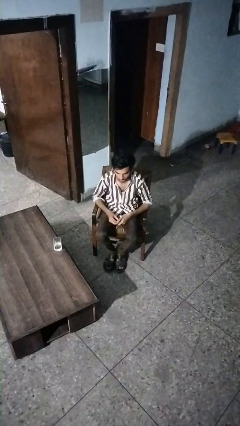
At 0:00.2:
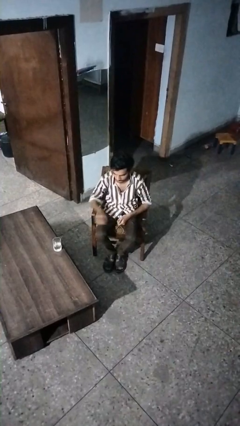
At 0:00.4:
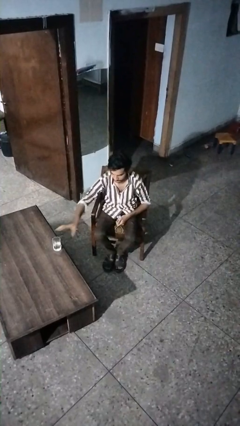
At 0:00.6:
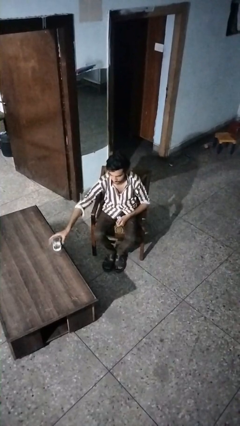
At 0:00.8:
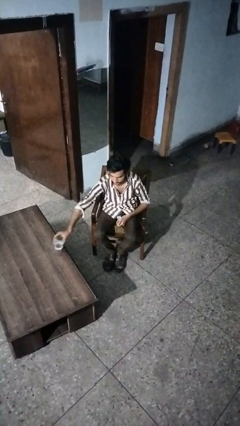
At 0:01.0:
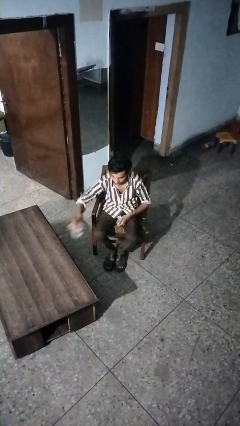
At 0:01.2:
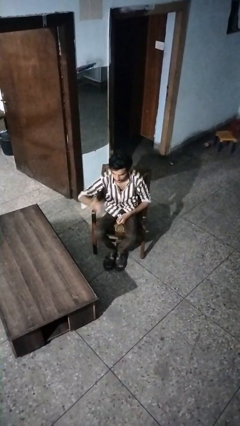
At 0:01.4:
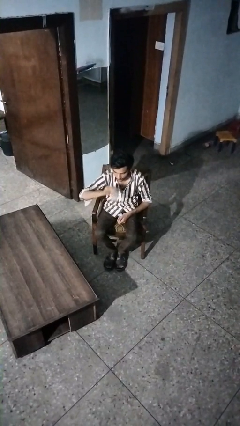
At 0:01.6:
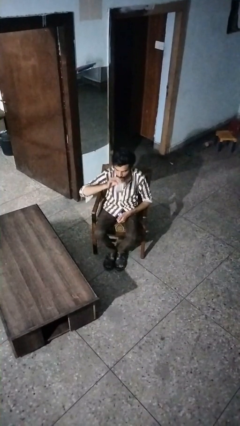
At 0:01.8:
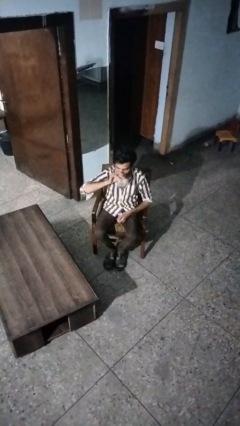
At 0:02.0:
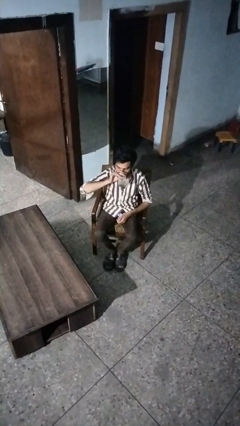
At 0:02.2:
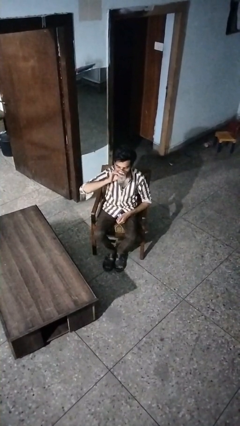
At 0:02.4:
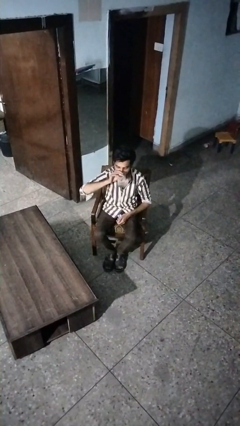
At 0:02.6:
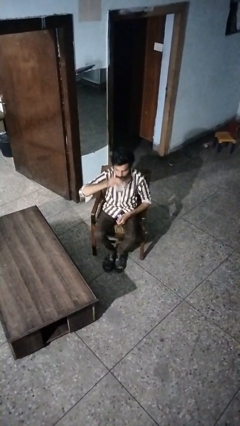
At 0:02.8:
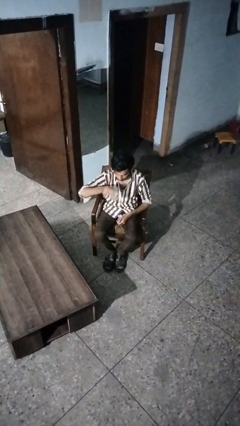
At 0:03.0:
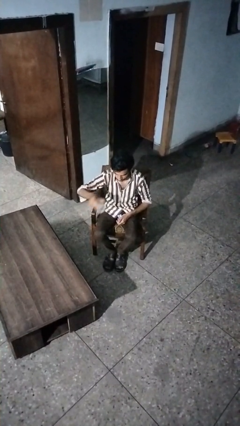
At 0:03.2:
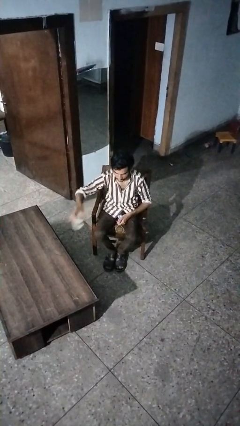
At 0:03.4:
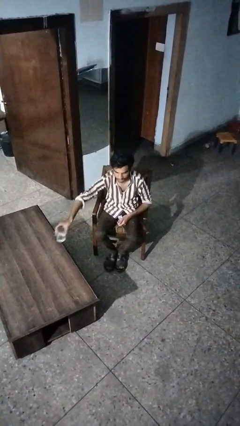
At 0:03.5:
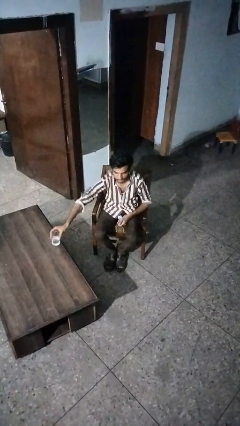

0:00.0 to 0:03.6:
person drinks from cup

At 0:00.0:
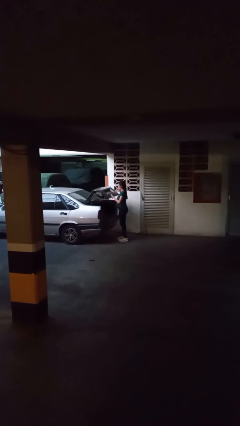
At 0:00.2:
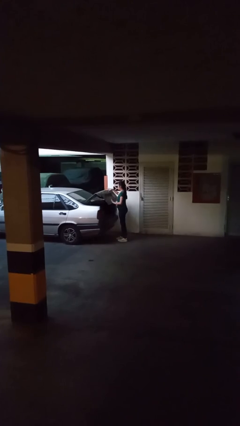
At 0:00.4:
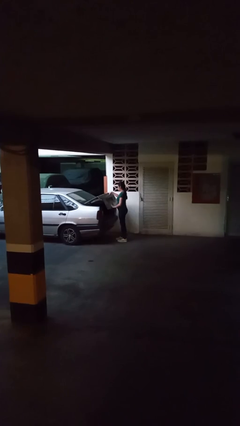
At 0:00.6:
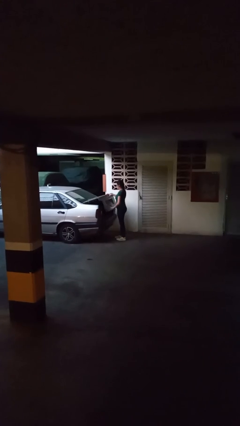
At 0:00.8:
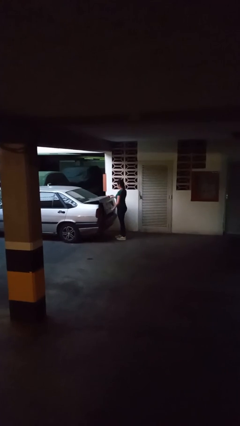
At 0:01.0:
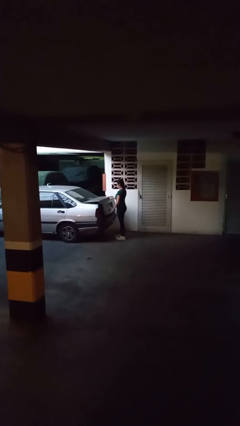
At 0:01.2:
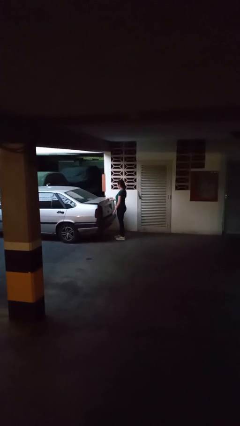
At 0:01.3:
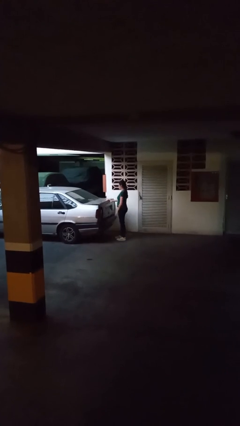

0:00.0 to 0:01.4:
person closes car trunk

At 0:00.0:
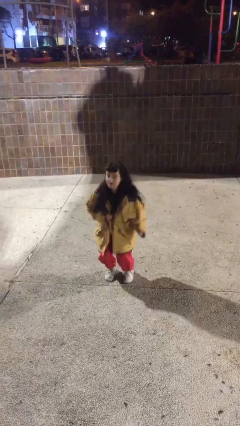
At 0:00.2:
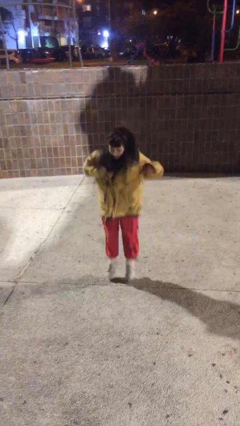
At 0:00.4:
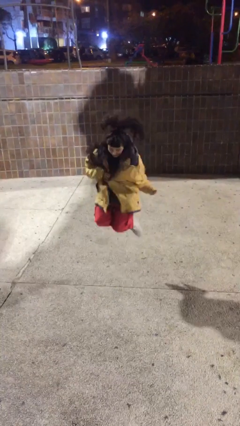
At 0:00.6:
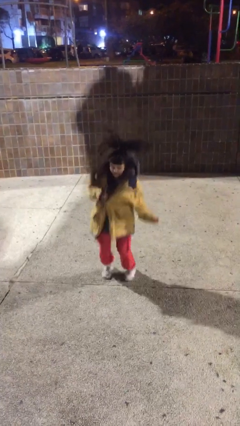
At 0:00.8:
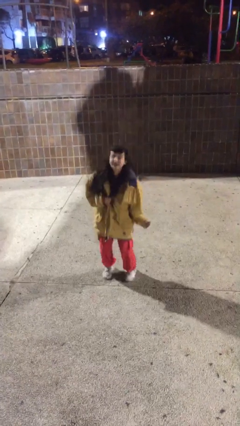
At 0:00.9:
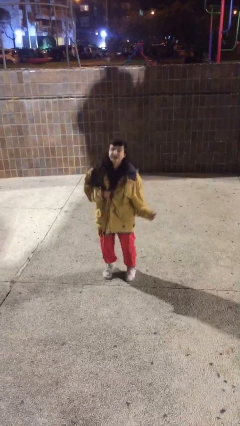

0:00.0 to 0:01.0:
person jumps

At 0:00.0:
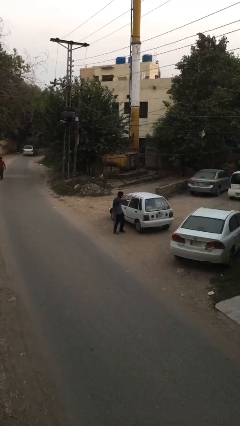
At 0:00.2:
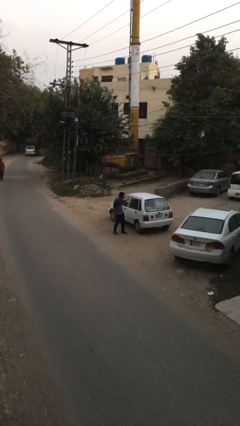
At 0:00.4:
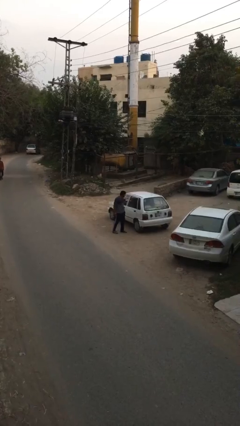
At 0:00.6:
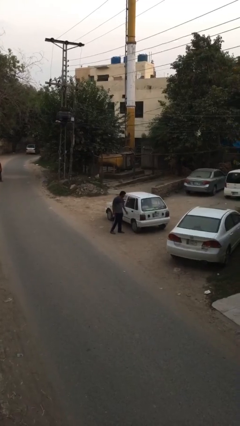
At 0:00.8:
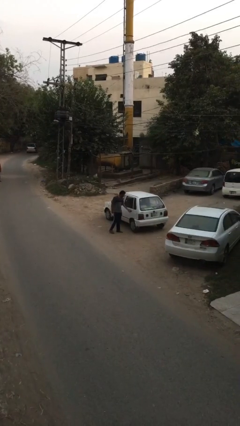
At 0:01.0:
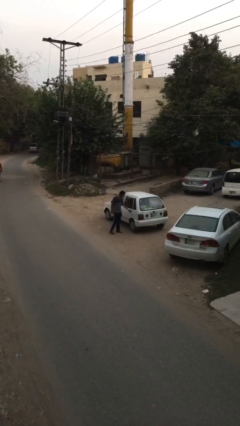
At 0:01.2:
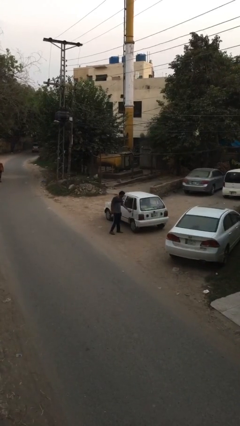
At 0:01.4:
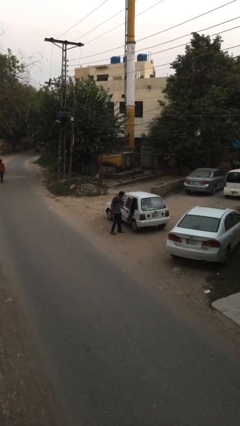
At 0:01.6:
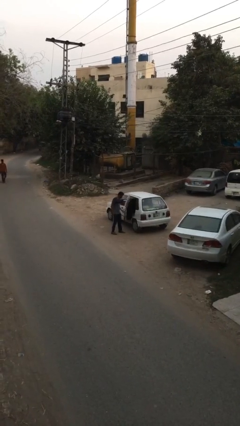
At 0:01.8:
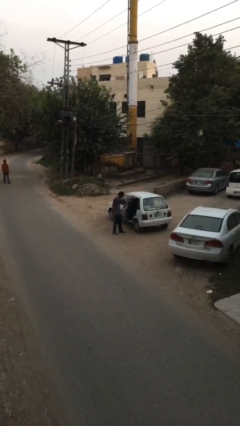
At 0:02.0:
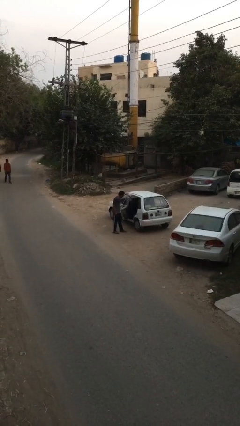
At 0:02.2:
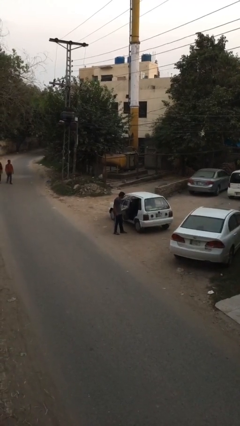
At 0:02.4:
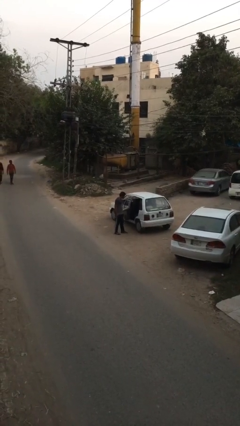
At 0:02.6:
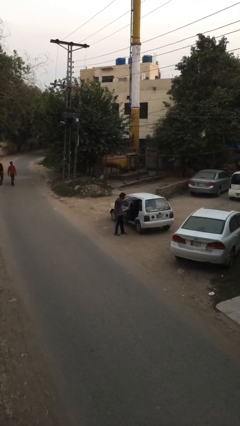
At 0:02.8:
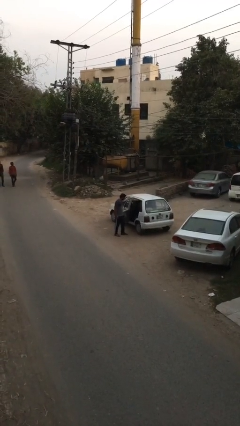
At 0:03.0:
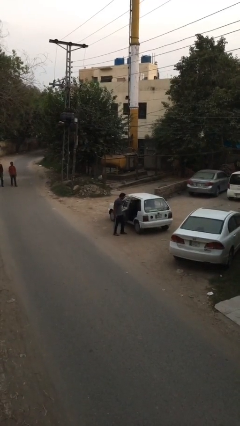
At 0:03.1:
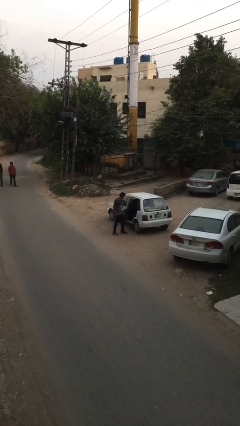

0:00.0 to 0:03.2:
person opens car door

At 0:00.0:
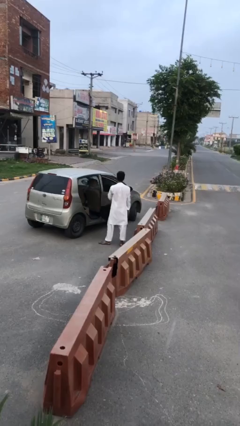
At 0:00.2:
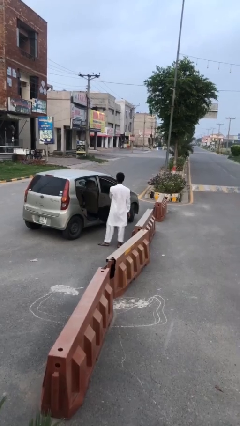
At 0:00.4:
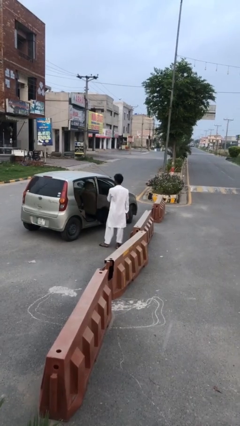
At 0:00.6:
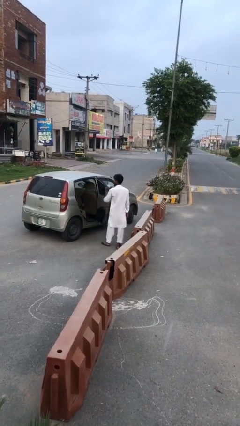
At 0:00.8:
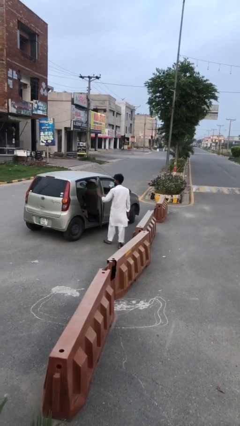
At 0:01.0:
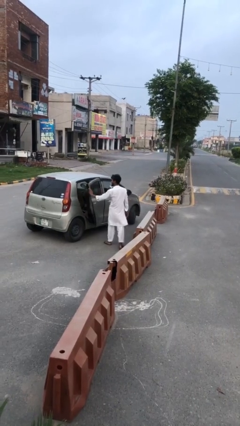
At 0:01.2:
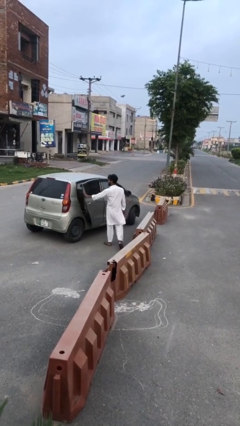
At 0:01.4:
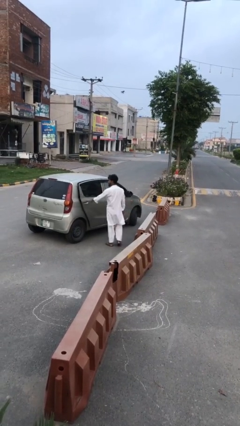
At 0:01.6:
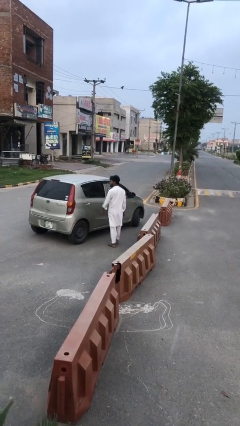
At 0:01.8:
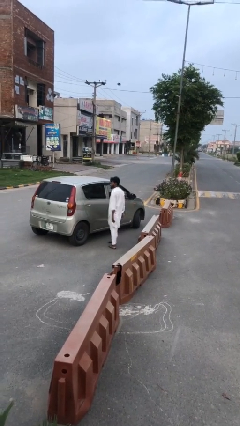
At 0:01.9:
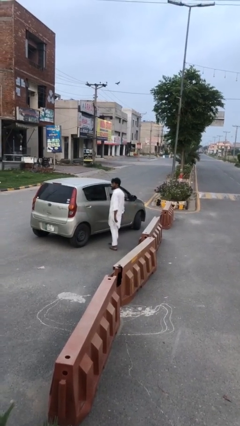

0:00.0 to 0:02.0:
person closes car door

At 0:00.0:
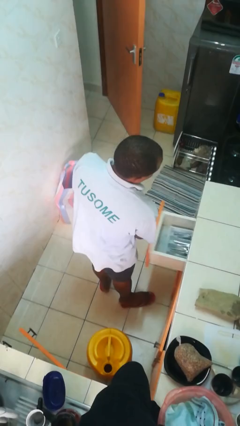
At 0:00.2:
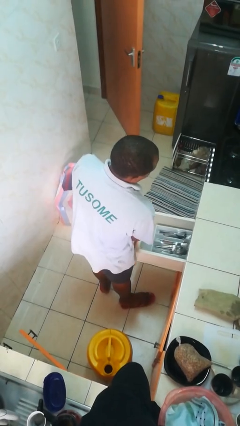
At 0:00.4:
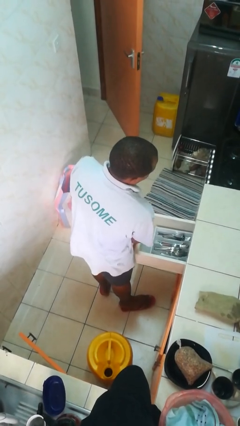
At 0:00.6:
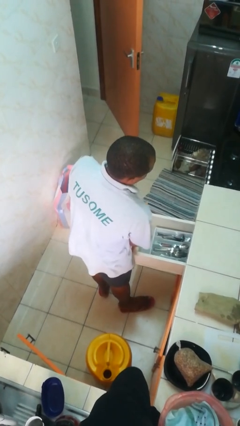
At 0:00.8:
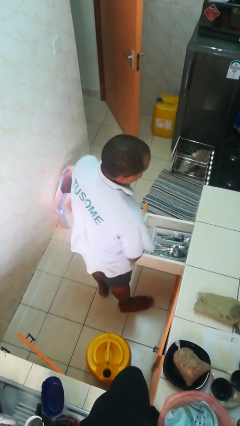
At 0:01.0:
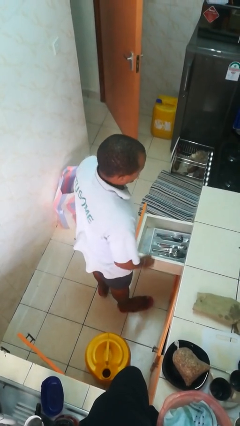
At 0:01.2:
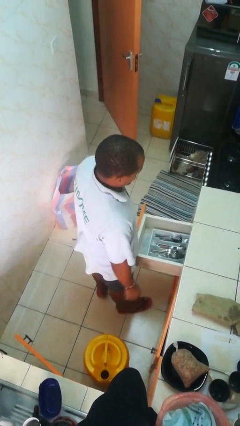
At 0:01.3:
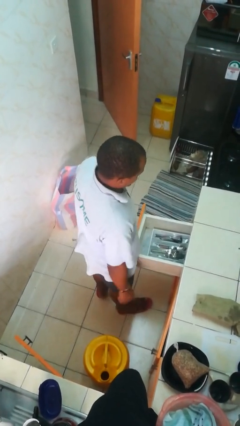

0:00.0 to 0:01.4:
person opens kitchen drawer

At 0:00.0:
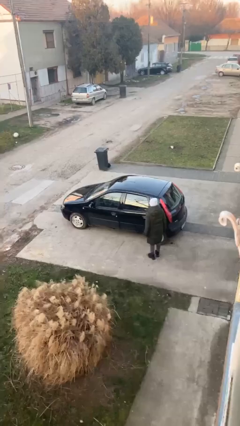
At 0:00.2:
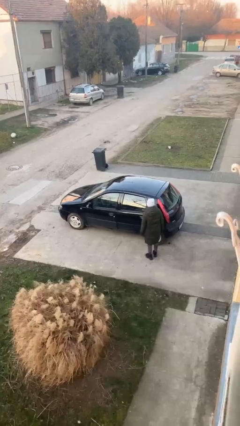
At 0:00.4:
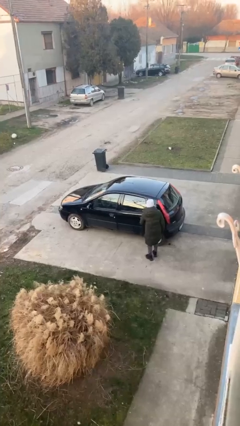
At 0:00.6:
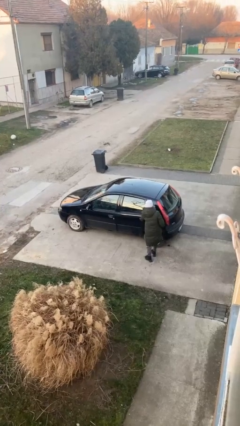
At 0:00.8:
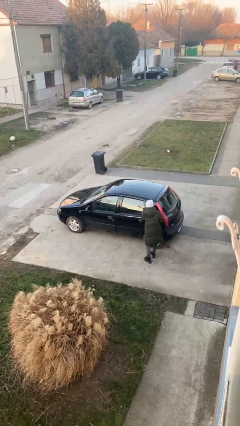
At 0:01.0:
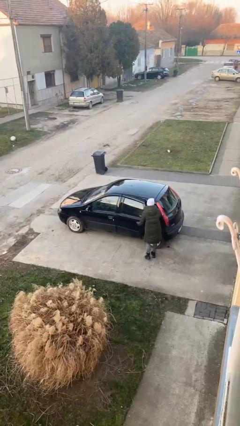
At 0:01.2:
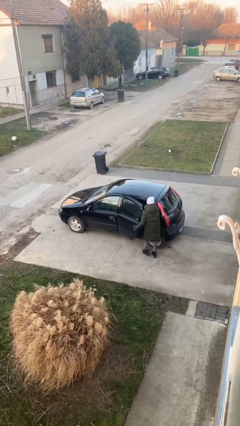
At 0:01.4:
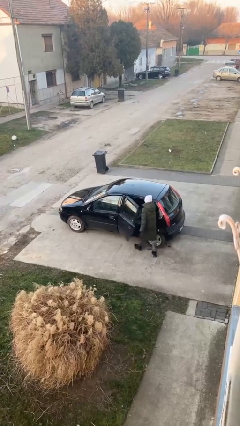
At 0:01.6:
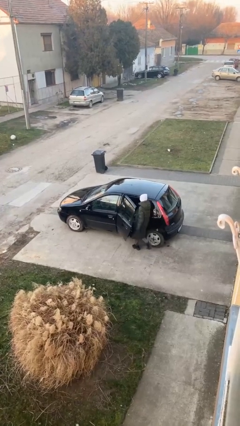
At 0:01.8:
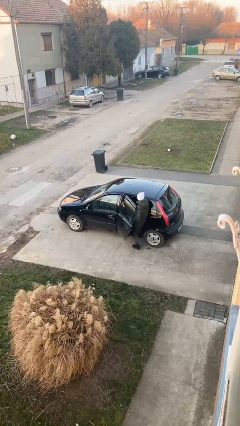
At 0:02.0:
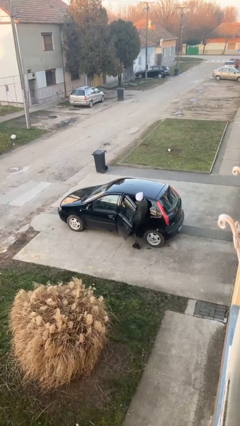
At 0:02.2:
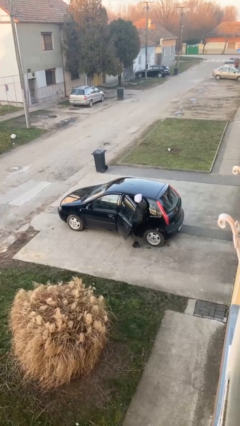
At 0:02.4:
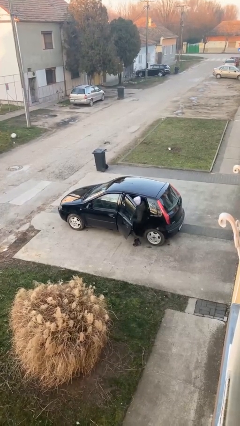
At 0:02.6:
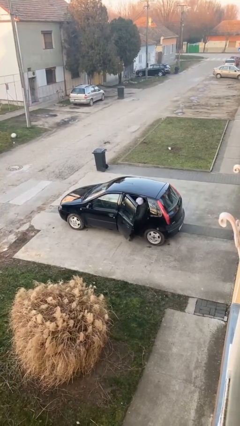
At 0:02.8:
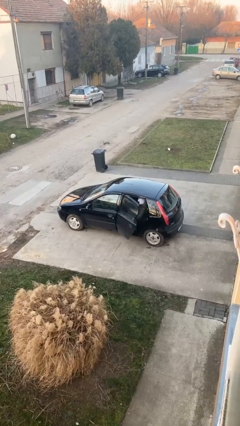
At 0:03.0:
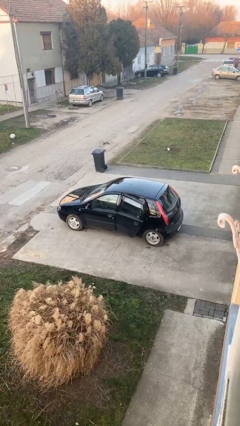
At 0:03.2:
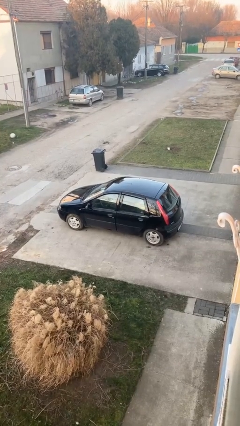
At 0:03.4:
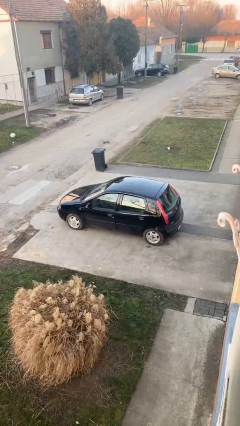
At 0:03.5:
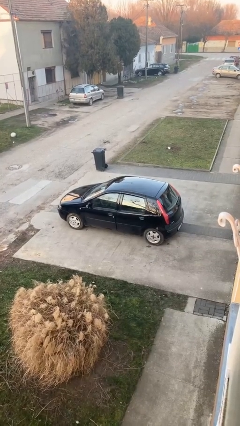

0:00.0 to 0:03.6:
car picks up person

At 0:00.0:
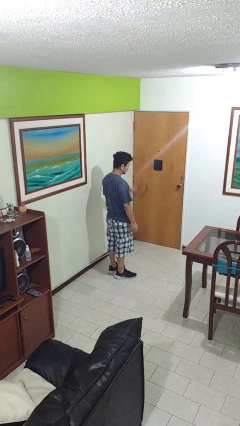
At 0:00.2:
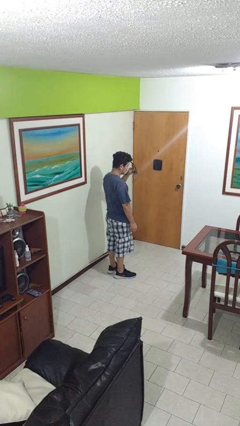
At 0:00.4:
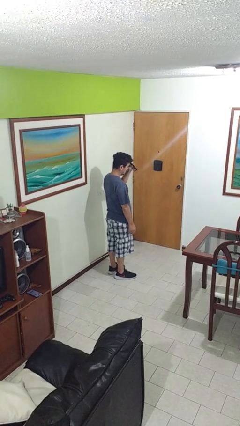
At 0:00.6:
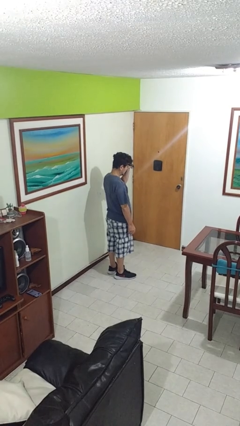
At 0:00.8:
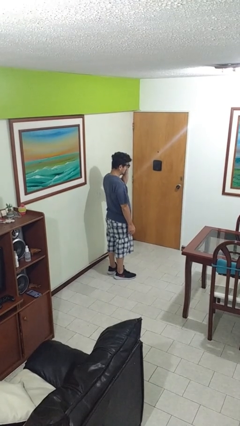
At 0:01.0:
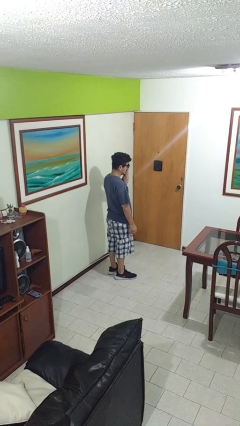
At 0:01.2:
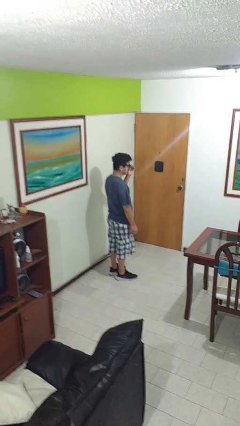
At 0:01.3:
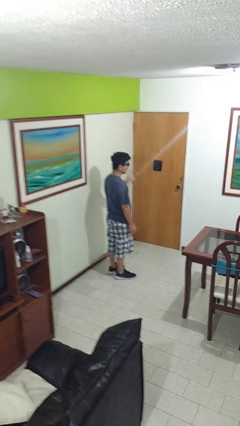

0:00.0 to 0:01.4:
person puts on sunglasses
